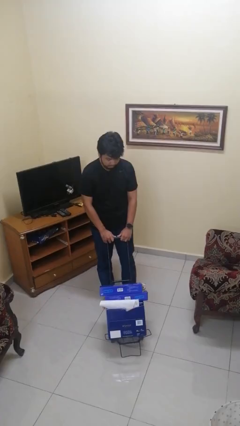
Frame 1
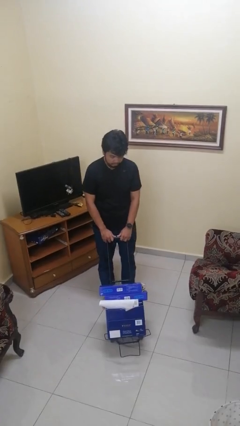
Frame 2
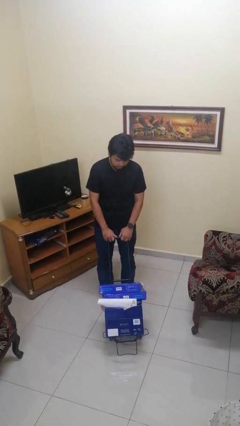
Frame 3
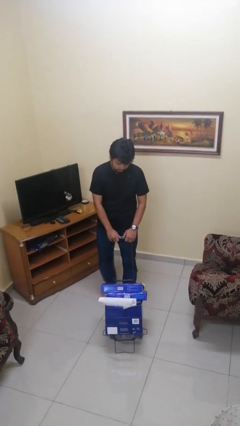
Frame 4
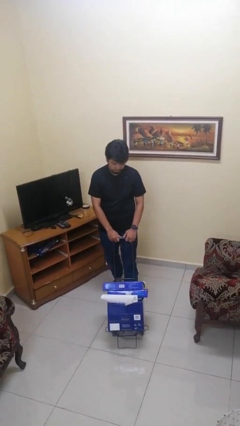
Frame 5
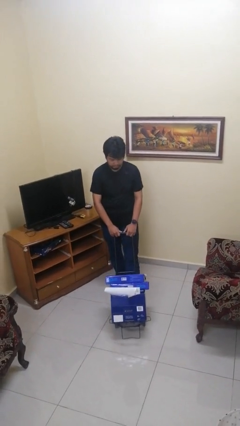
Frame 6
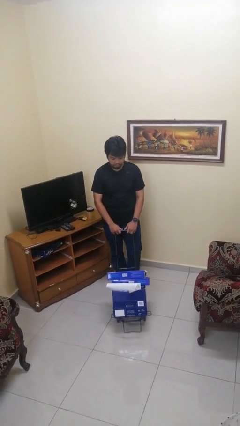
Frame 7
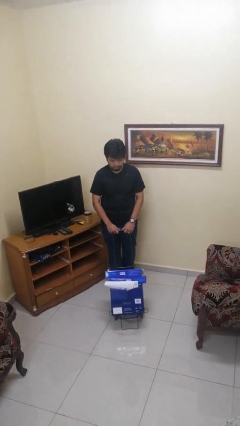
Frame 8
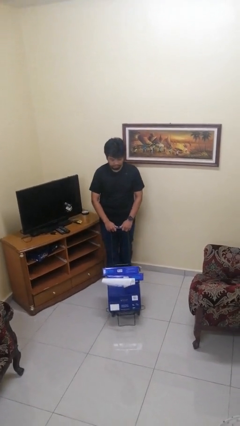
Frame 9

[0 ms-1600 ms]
person pulls wheeled cart

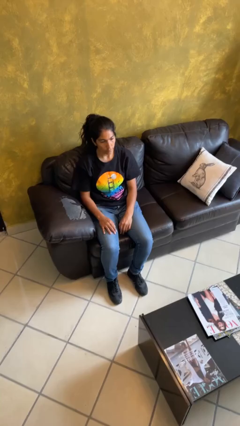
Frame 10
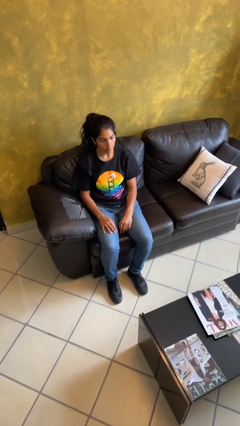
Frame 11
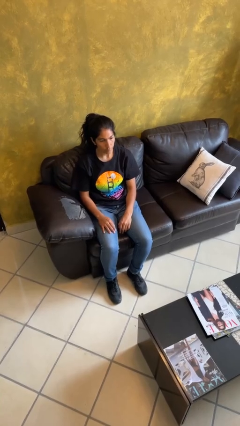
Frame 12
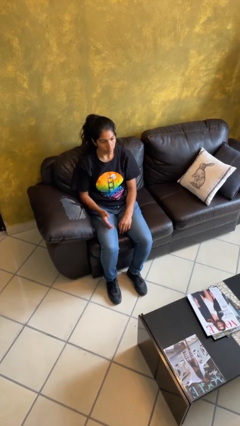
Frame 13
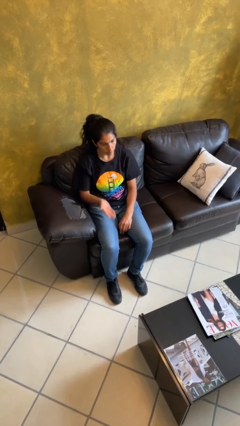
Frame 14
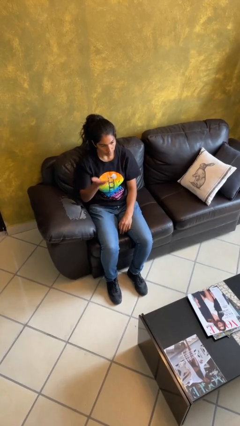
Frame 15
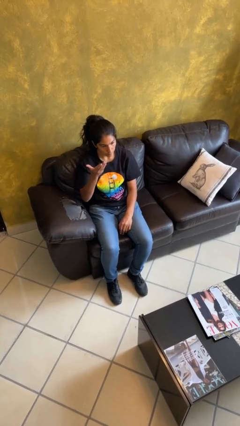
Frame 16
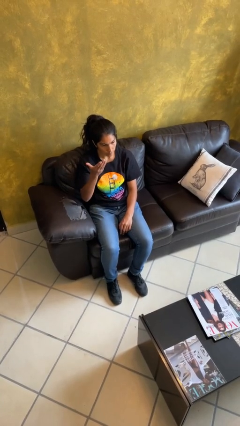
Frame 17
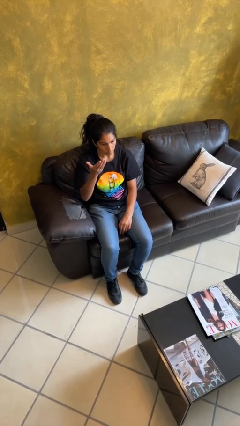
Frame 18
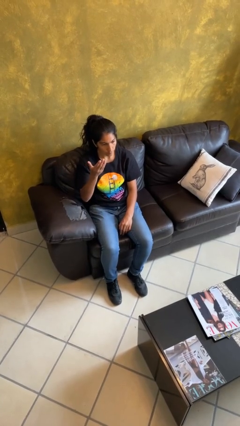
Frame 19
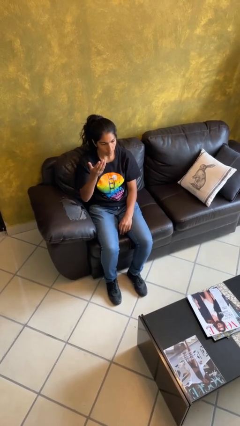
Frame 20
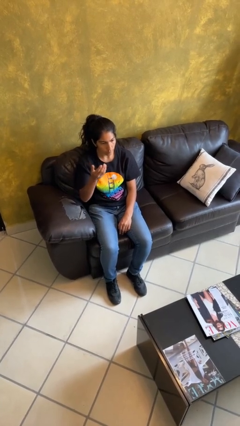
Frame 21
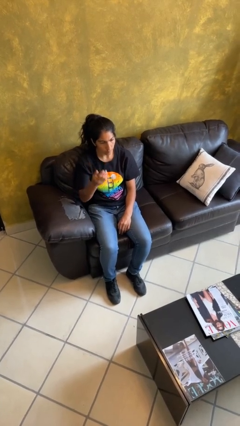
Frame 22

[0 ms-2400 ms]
person gestures swipe up

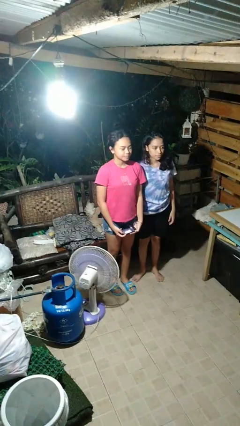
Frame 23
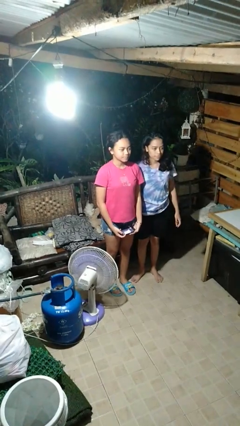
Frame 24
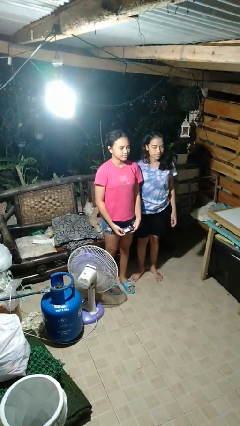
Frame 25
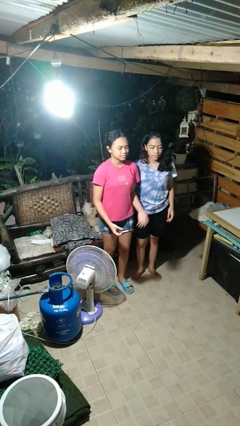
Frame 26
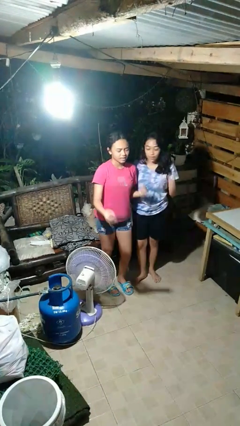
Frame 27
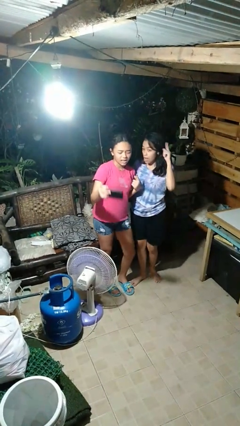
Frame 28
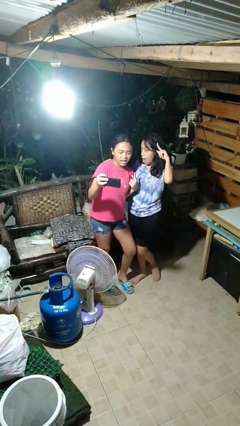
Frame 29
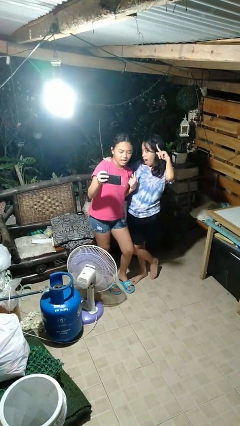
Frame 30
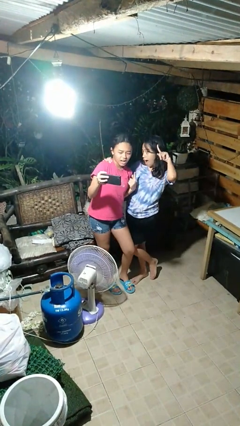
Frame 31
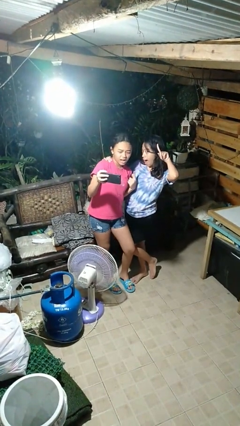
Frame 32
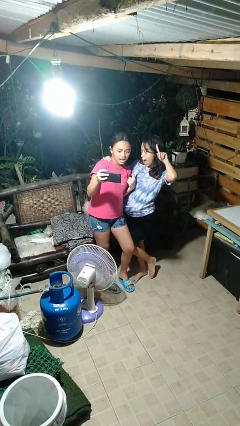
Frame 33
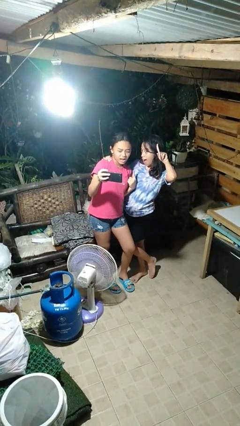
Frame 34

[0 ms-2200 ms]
person takes selfie with person

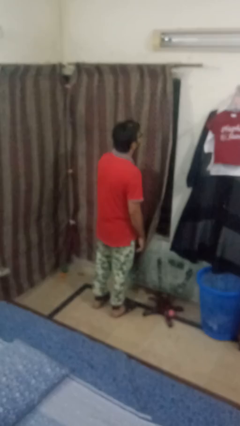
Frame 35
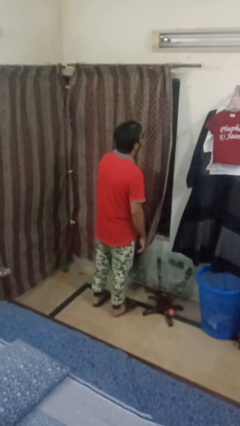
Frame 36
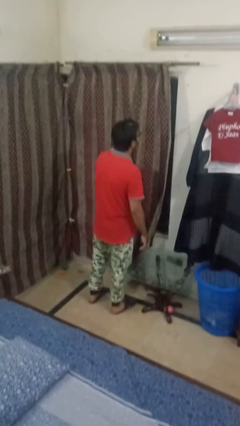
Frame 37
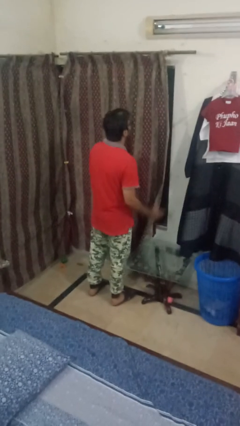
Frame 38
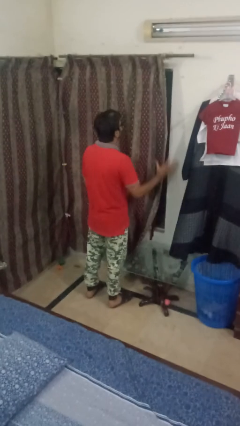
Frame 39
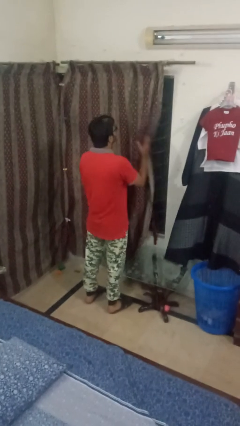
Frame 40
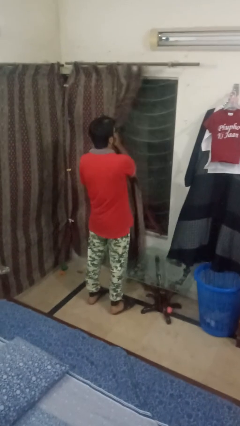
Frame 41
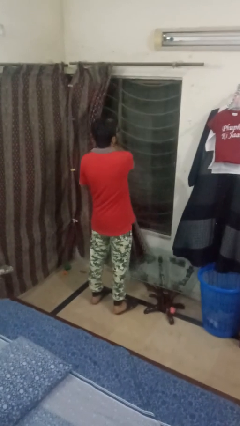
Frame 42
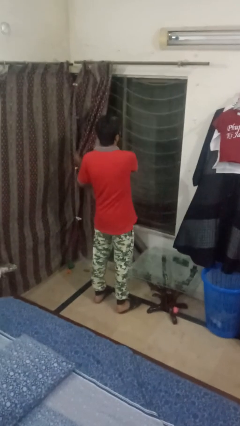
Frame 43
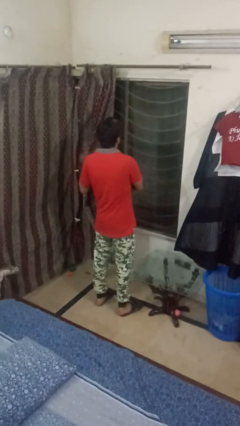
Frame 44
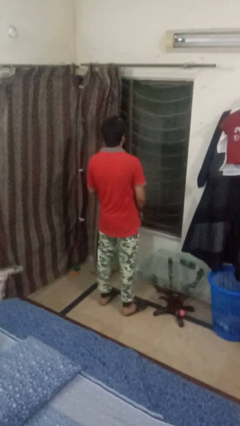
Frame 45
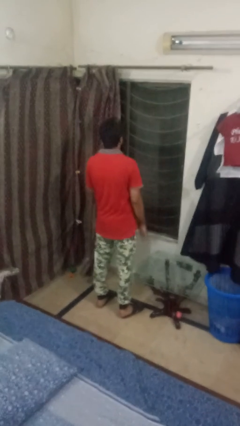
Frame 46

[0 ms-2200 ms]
person opens curtains

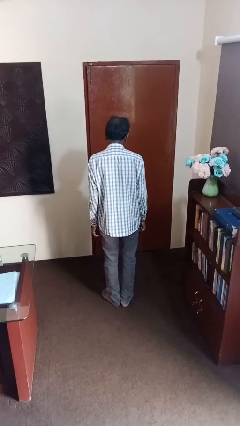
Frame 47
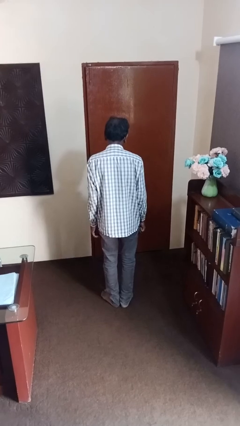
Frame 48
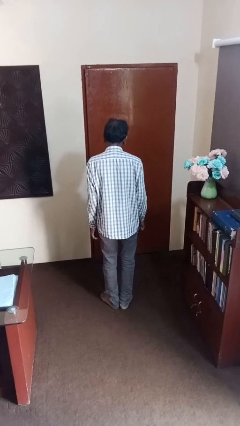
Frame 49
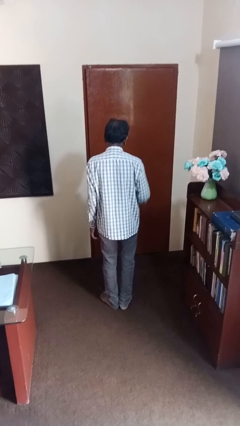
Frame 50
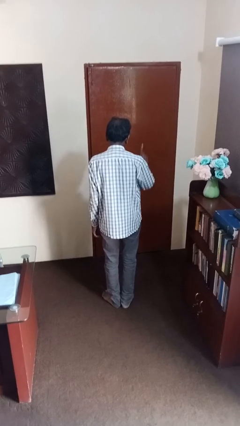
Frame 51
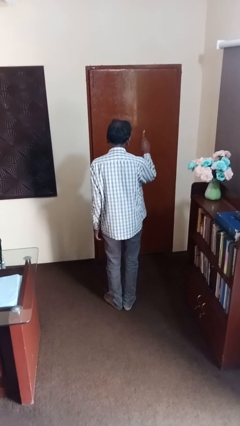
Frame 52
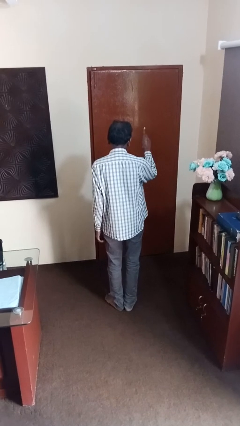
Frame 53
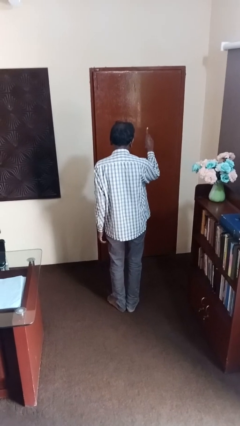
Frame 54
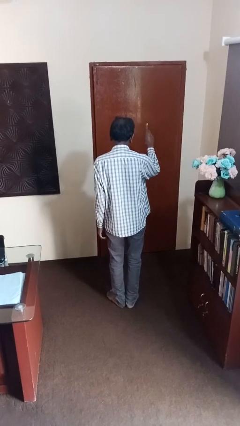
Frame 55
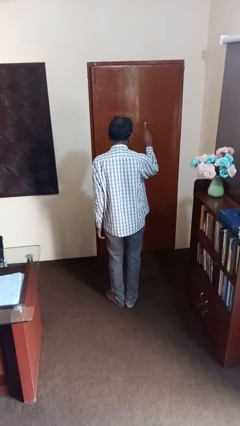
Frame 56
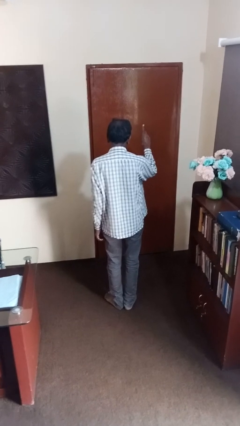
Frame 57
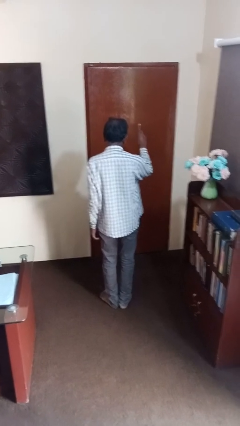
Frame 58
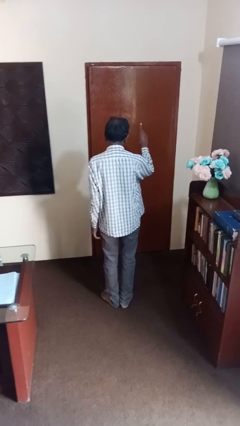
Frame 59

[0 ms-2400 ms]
person gestures number one

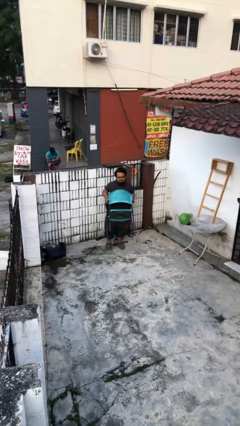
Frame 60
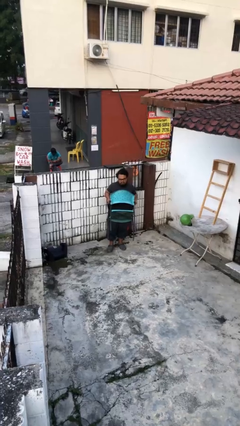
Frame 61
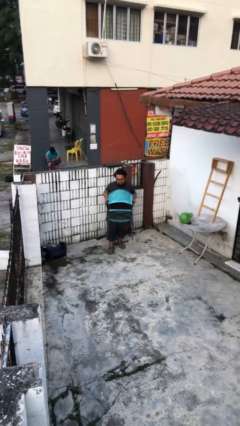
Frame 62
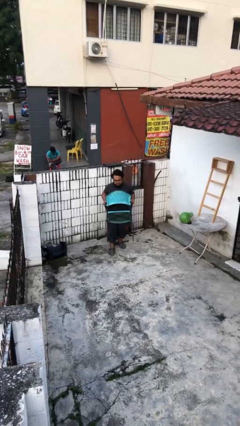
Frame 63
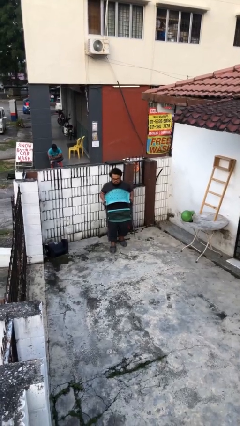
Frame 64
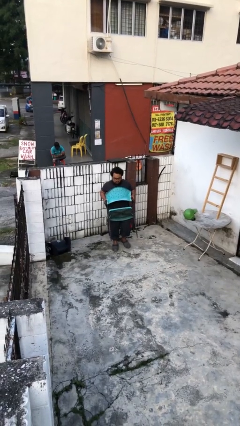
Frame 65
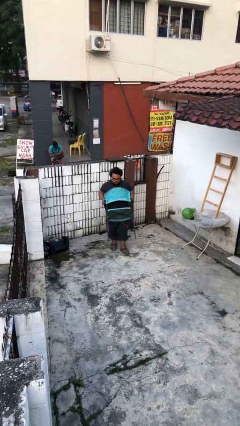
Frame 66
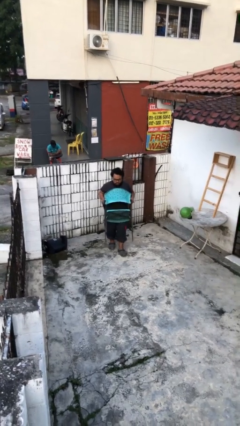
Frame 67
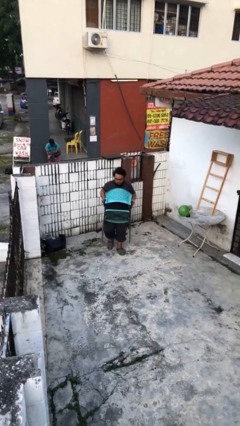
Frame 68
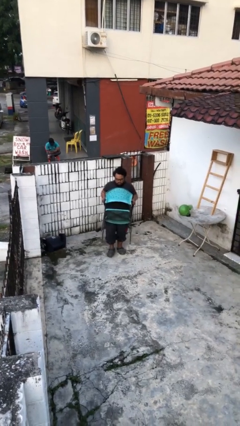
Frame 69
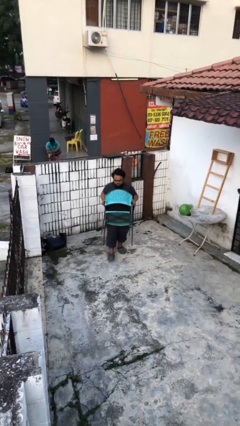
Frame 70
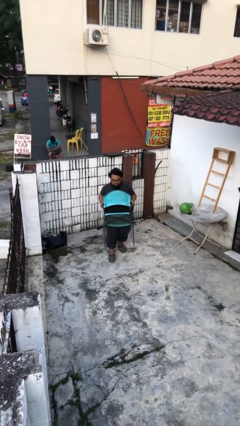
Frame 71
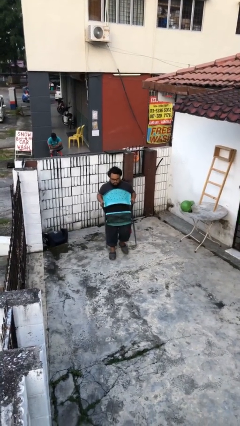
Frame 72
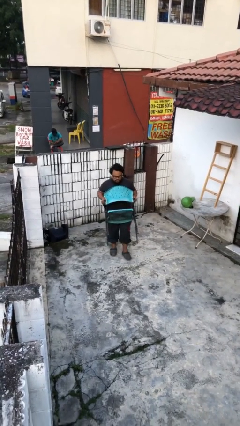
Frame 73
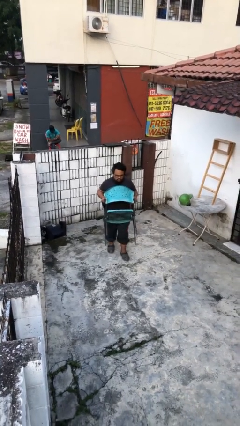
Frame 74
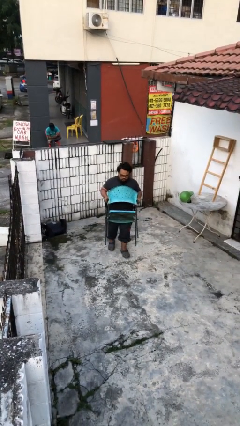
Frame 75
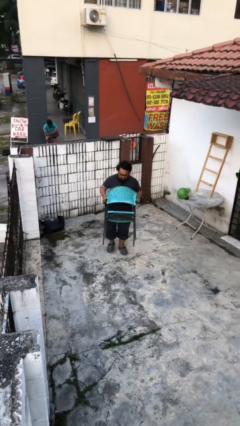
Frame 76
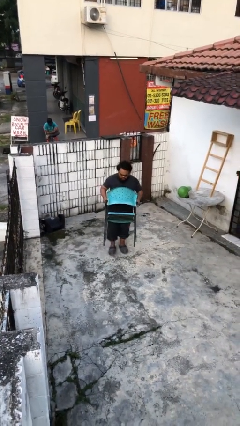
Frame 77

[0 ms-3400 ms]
person carries heavy object

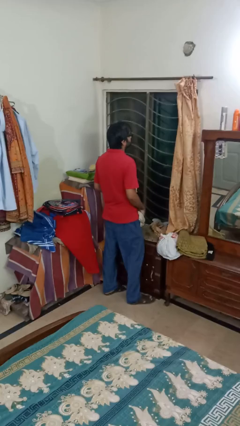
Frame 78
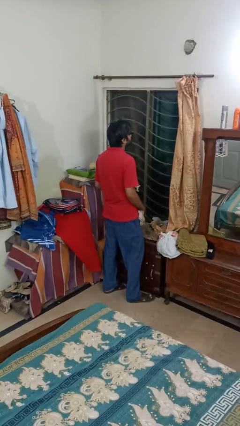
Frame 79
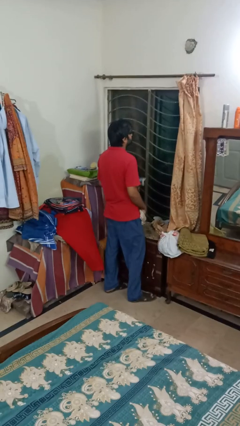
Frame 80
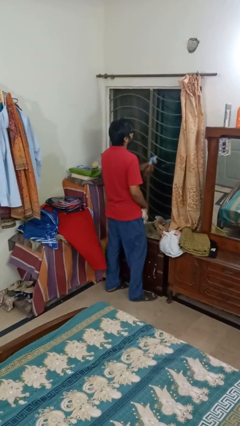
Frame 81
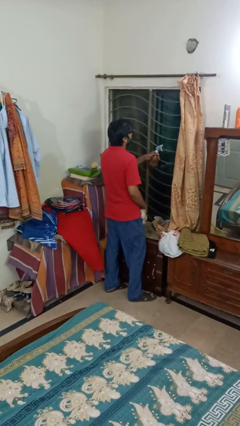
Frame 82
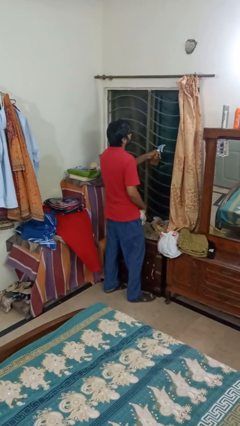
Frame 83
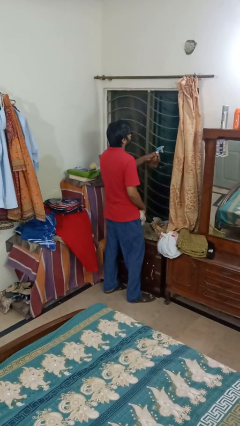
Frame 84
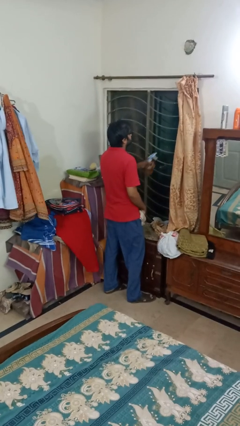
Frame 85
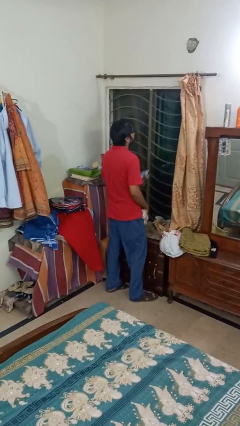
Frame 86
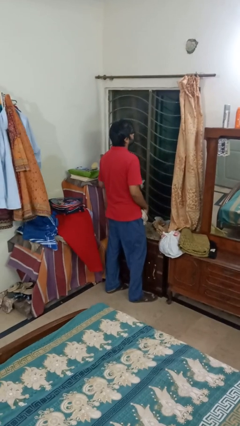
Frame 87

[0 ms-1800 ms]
person sprays from bottle

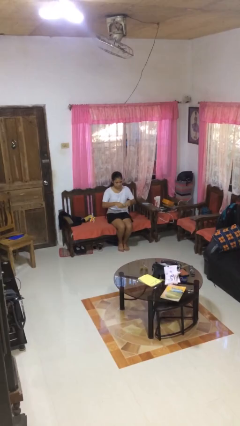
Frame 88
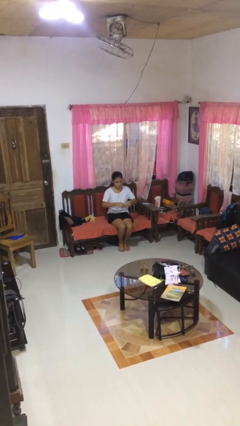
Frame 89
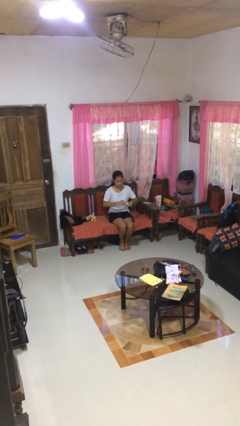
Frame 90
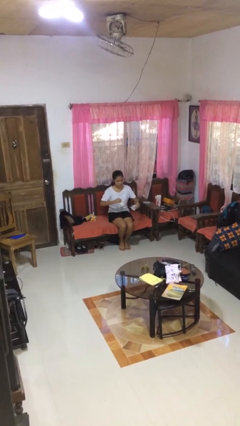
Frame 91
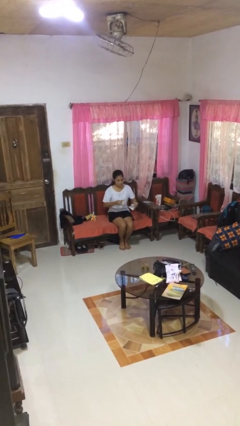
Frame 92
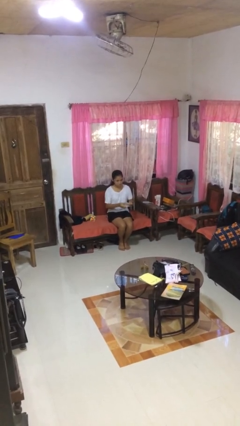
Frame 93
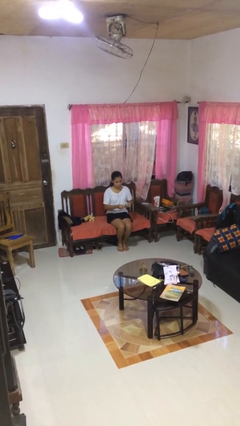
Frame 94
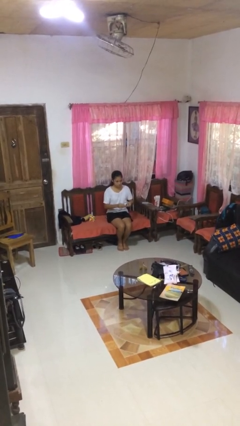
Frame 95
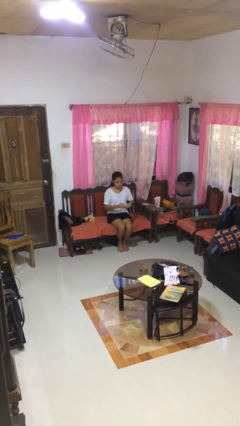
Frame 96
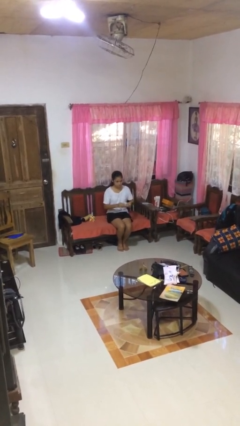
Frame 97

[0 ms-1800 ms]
person tears paper
